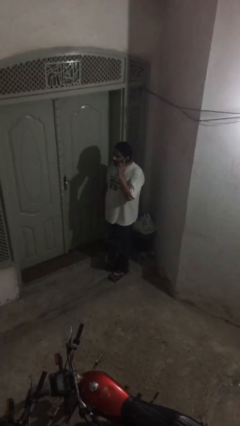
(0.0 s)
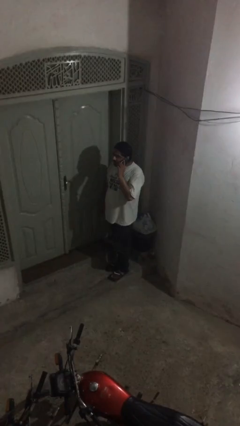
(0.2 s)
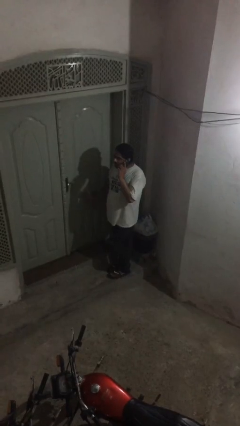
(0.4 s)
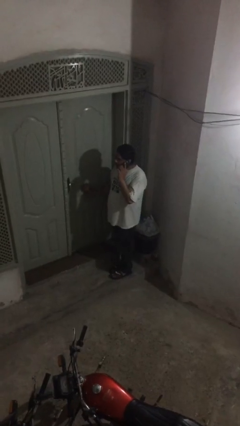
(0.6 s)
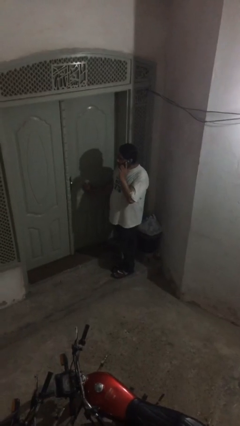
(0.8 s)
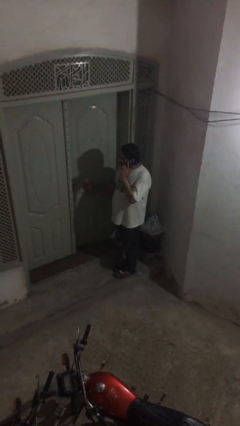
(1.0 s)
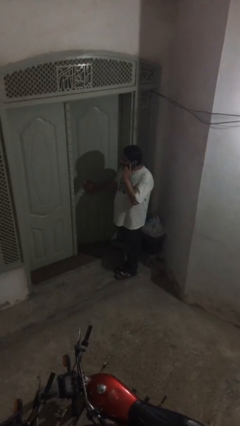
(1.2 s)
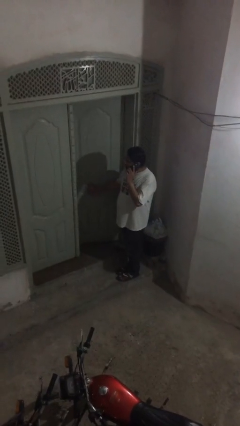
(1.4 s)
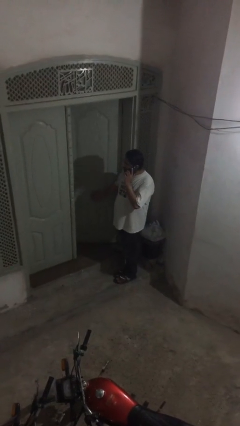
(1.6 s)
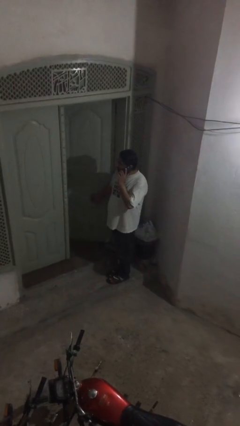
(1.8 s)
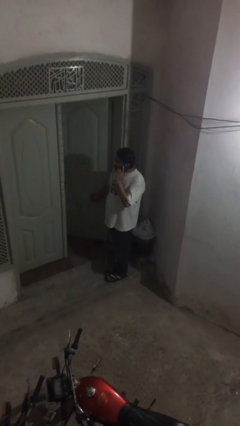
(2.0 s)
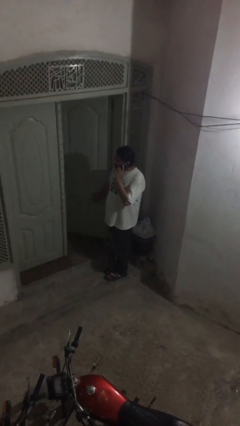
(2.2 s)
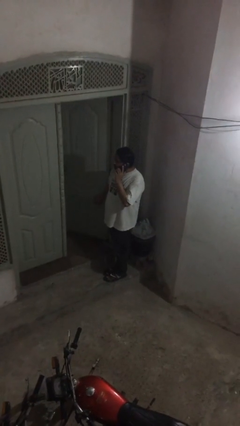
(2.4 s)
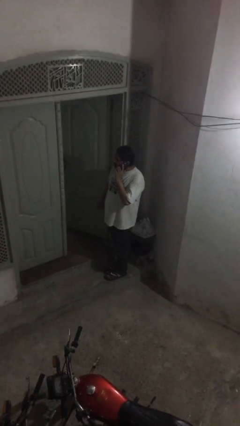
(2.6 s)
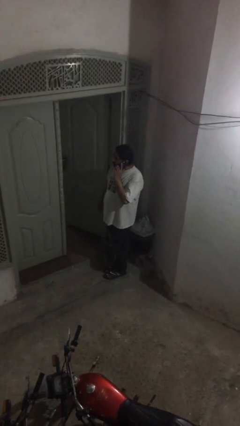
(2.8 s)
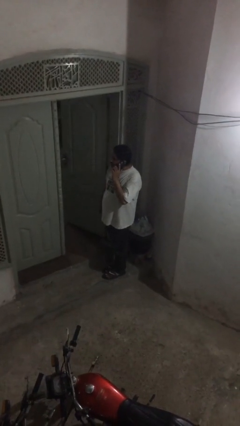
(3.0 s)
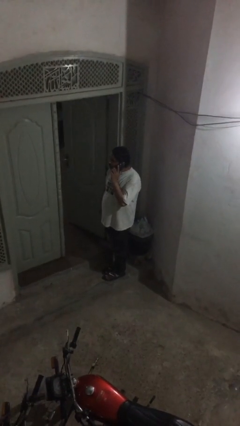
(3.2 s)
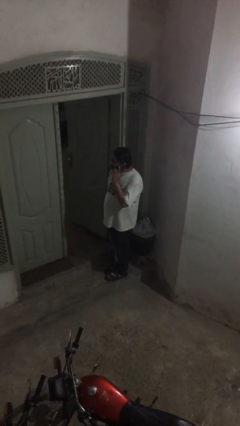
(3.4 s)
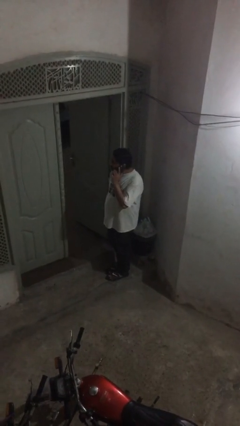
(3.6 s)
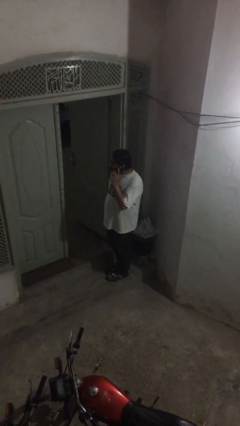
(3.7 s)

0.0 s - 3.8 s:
person opens facility door

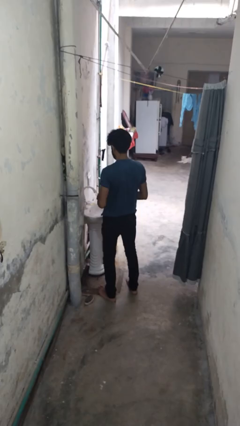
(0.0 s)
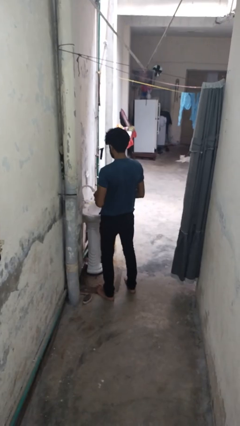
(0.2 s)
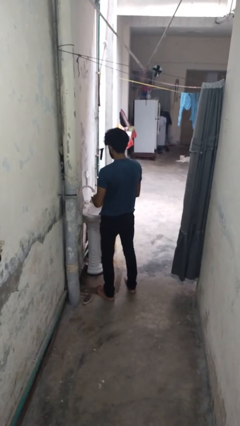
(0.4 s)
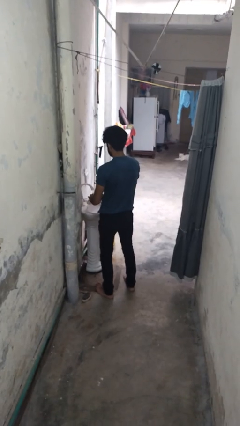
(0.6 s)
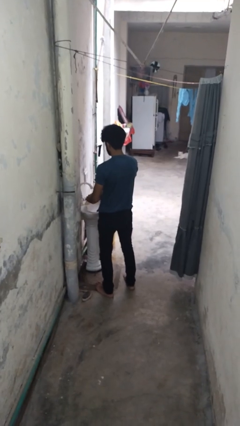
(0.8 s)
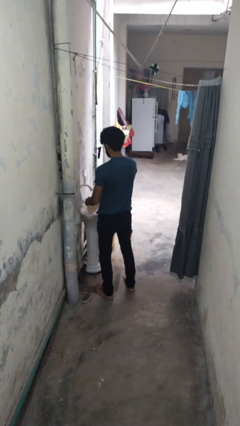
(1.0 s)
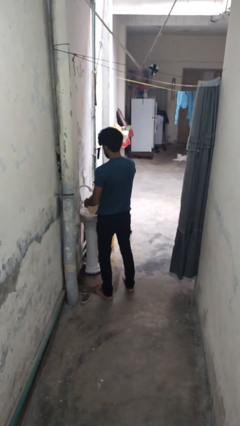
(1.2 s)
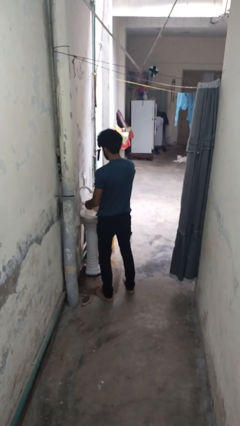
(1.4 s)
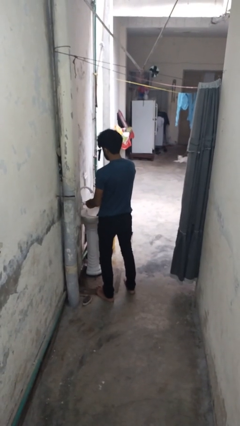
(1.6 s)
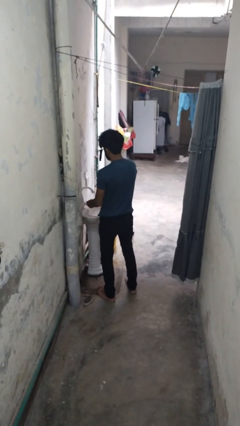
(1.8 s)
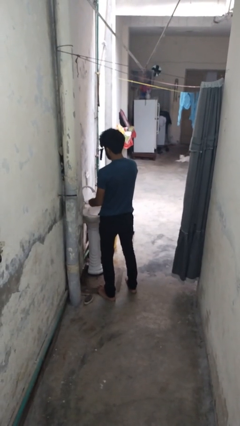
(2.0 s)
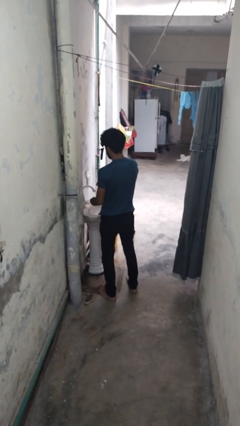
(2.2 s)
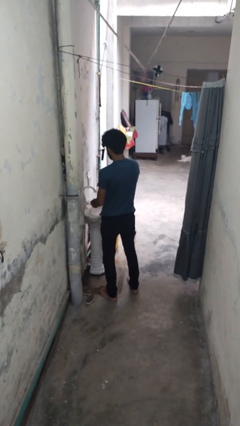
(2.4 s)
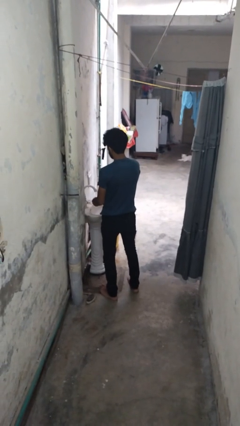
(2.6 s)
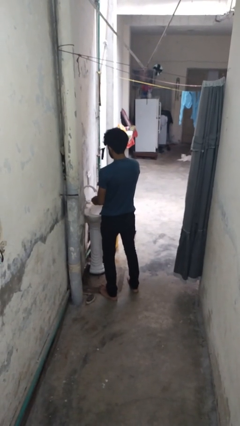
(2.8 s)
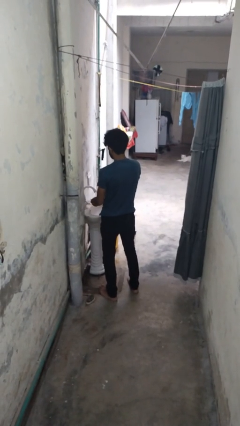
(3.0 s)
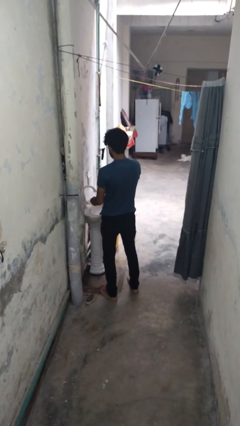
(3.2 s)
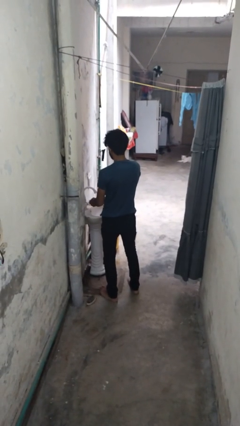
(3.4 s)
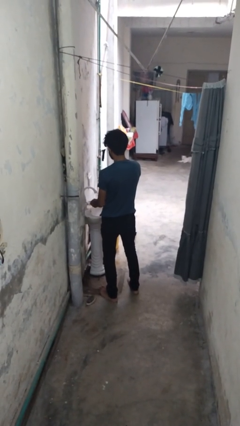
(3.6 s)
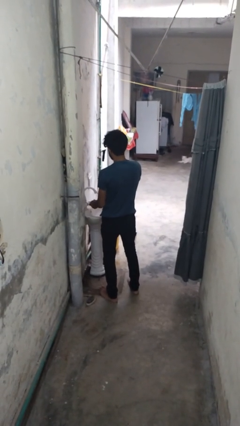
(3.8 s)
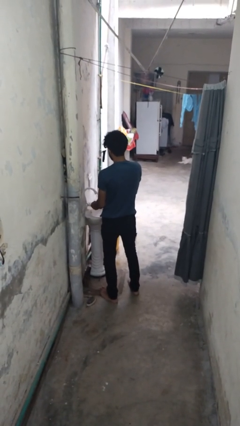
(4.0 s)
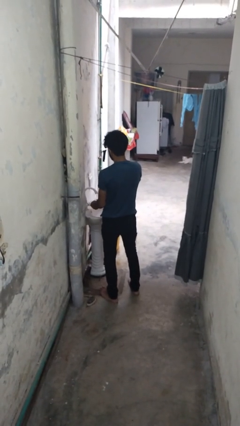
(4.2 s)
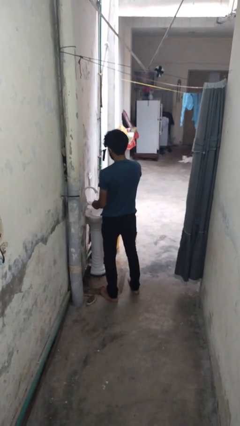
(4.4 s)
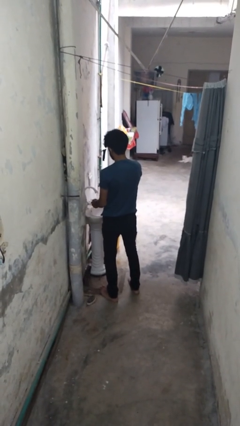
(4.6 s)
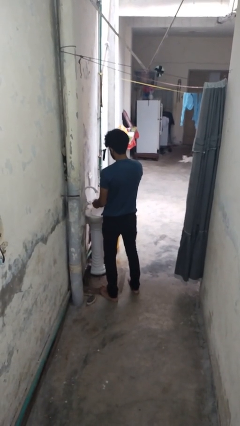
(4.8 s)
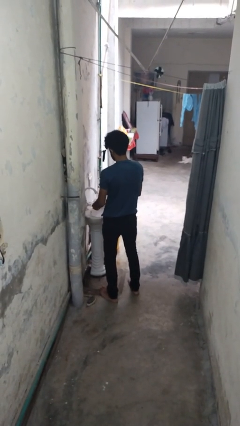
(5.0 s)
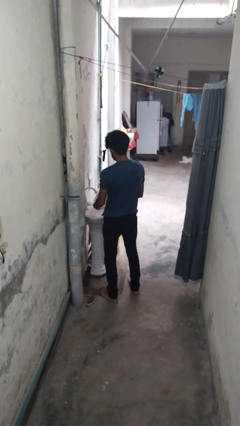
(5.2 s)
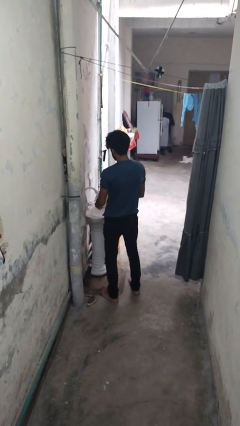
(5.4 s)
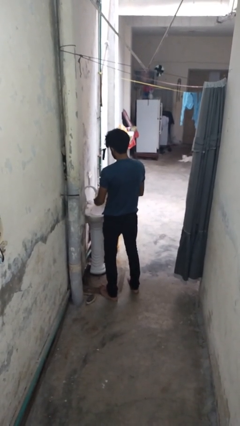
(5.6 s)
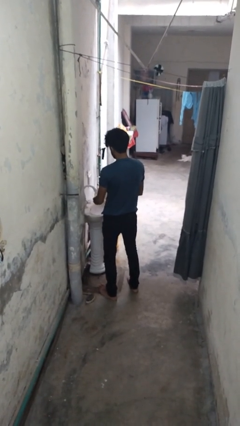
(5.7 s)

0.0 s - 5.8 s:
person washes dish

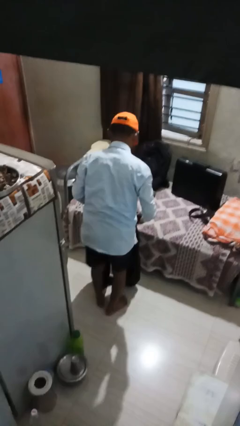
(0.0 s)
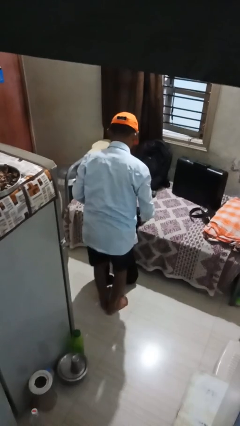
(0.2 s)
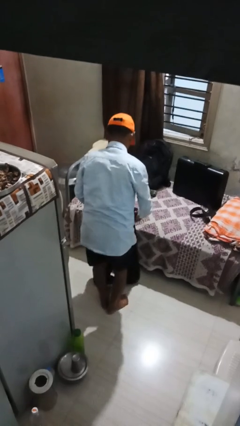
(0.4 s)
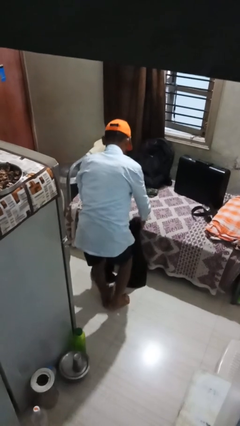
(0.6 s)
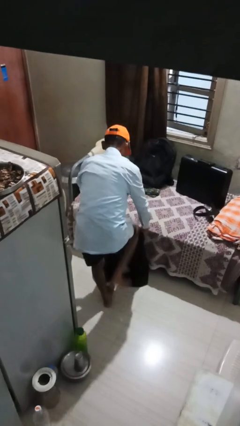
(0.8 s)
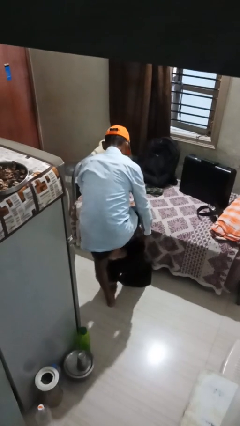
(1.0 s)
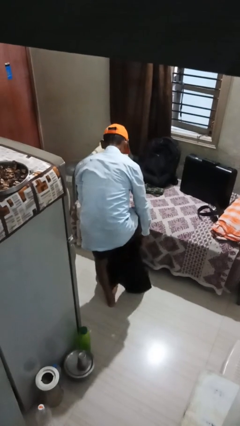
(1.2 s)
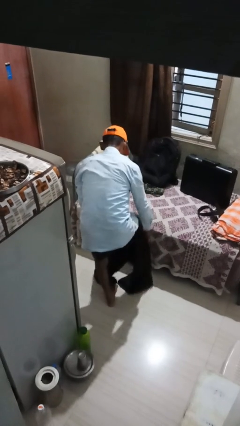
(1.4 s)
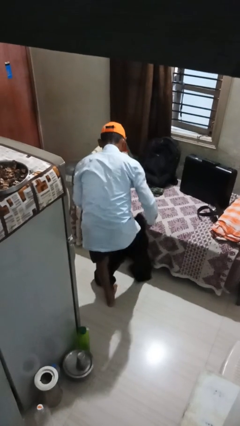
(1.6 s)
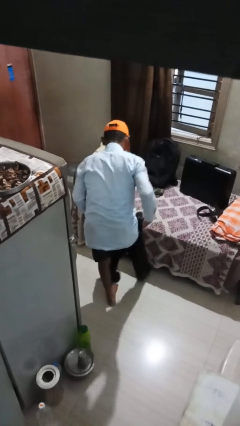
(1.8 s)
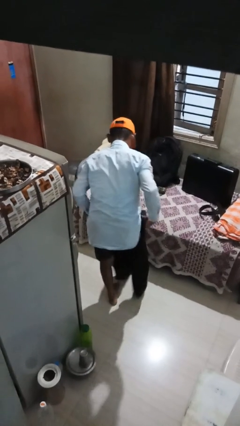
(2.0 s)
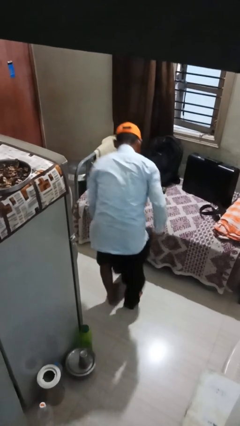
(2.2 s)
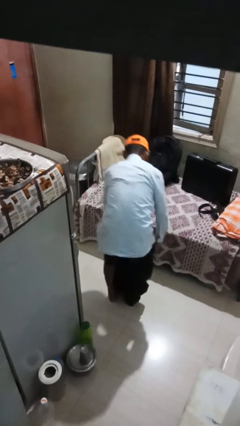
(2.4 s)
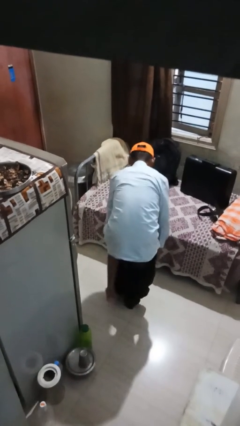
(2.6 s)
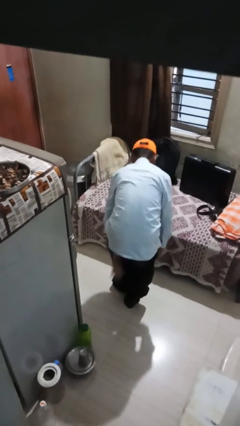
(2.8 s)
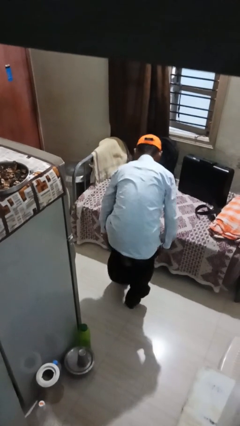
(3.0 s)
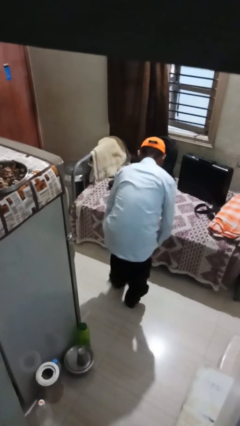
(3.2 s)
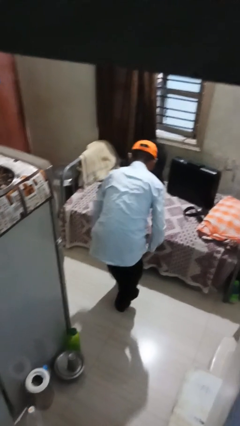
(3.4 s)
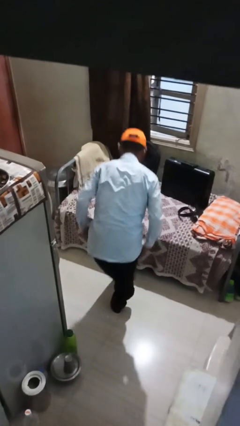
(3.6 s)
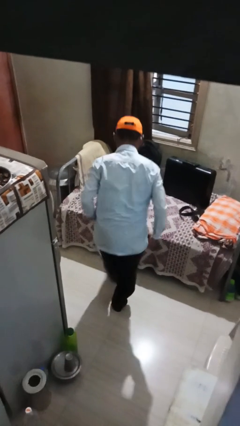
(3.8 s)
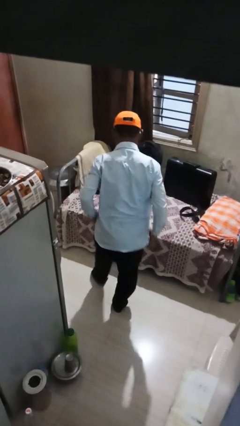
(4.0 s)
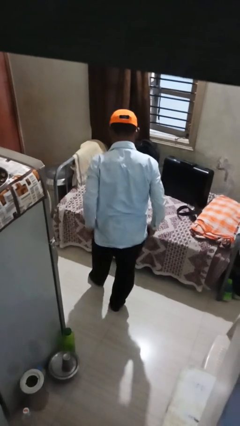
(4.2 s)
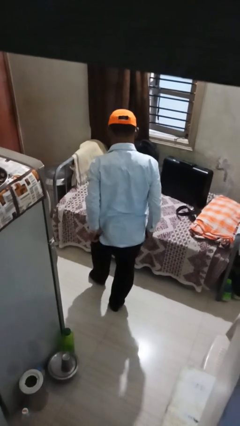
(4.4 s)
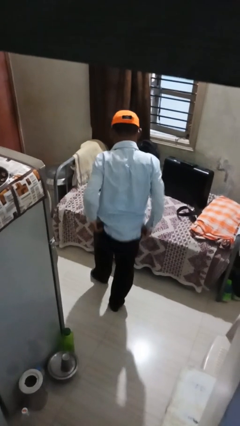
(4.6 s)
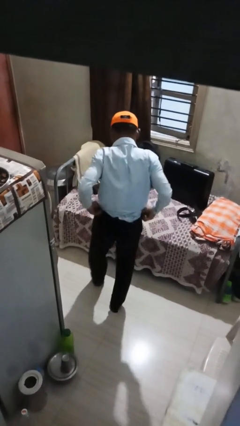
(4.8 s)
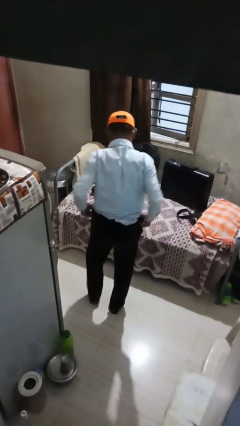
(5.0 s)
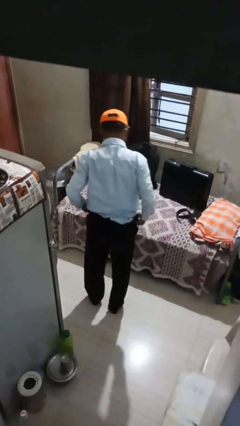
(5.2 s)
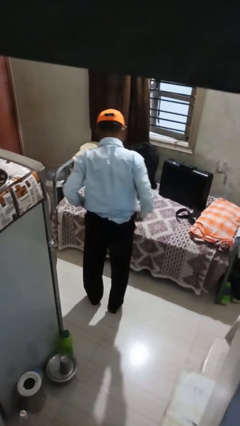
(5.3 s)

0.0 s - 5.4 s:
person puts on pants

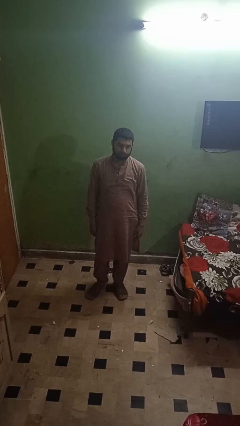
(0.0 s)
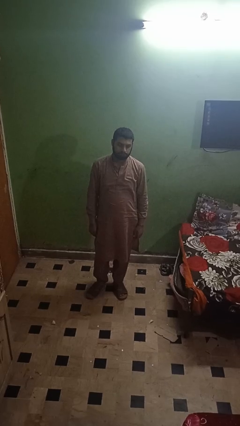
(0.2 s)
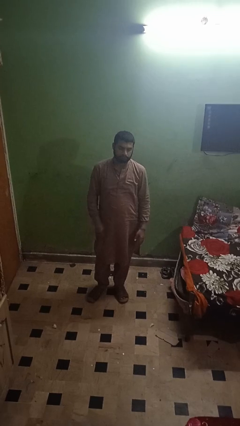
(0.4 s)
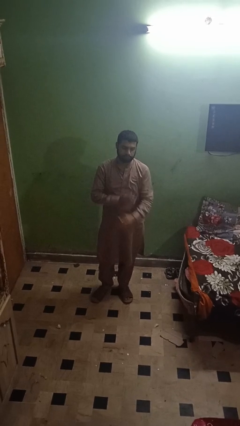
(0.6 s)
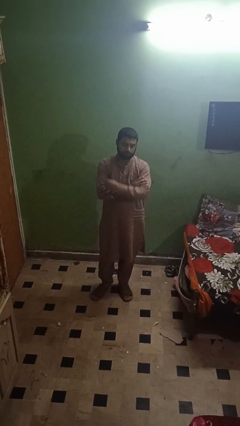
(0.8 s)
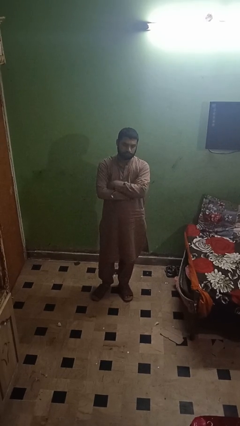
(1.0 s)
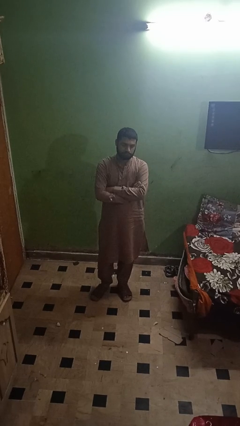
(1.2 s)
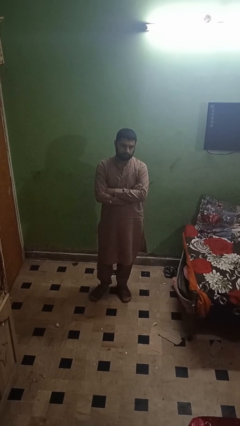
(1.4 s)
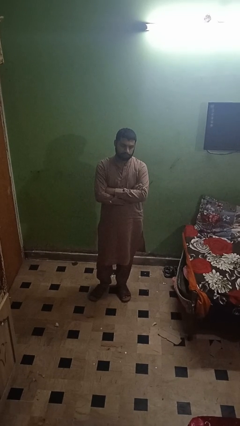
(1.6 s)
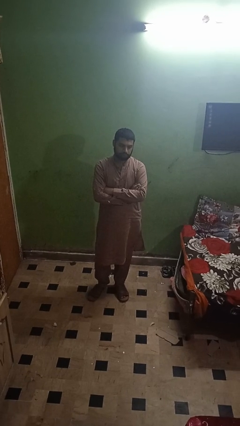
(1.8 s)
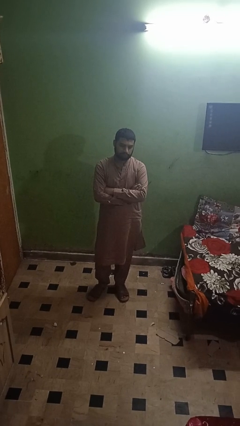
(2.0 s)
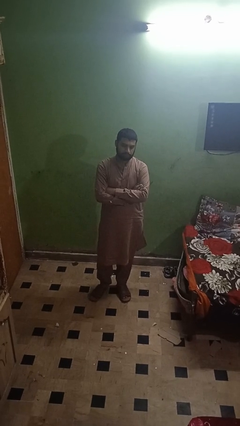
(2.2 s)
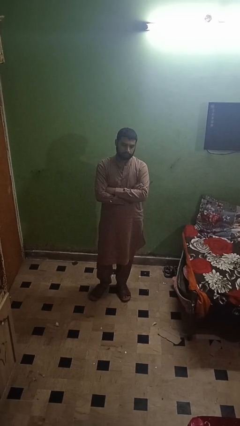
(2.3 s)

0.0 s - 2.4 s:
person crosses arms
